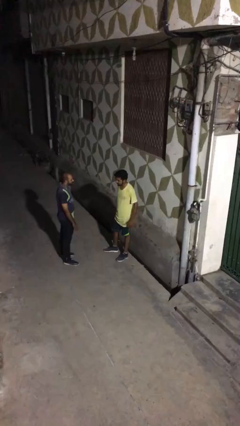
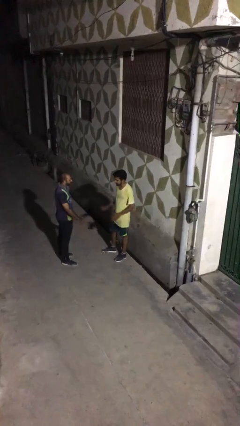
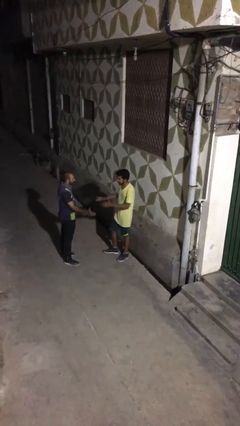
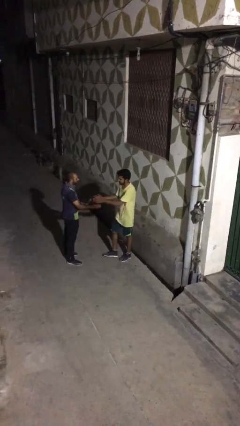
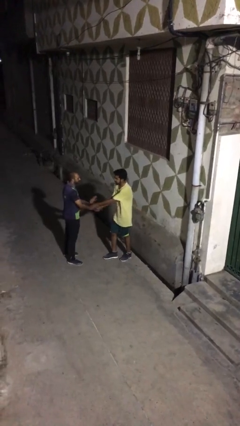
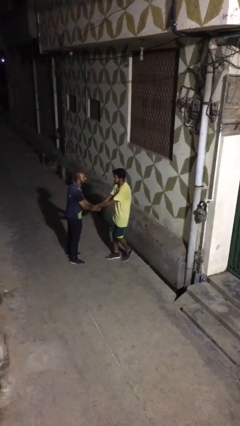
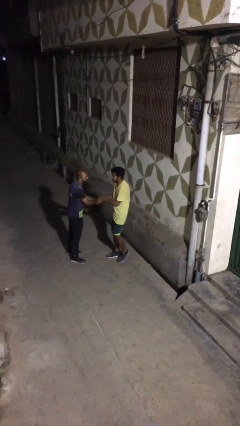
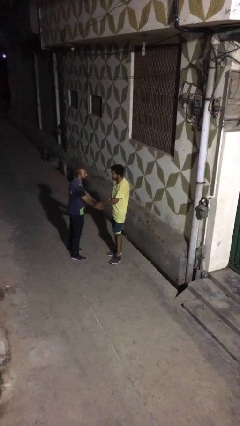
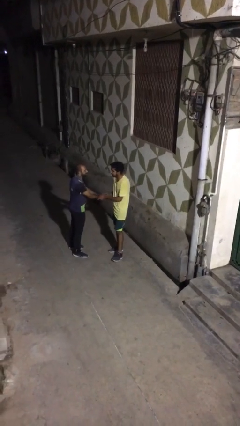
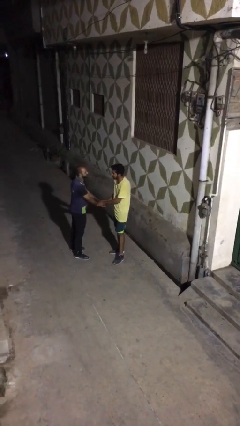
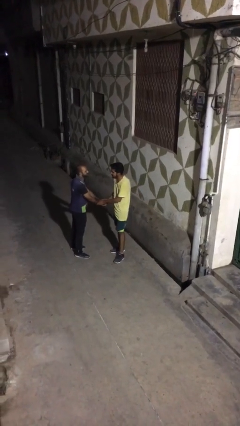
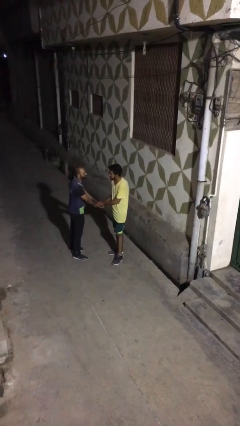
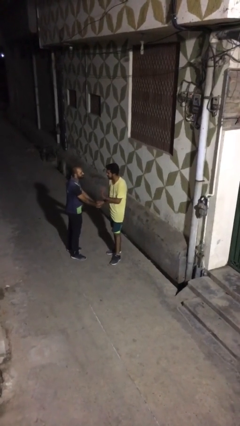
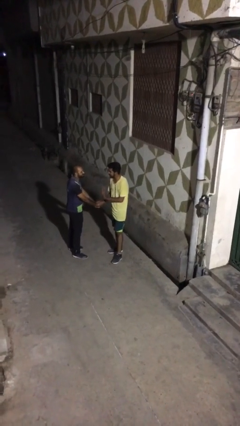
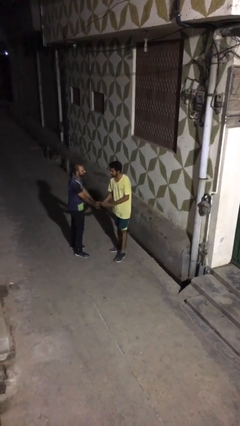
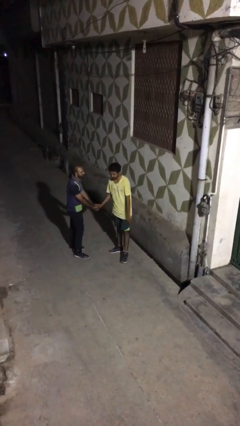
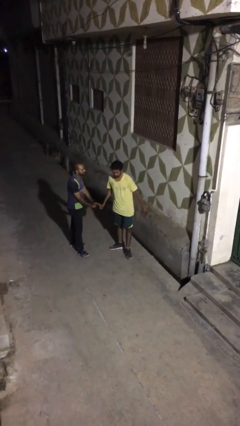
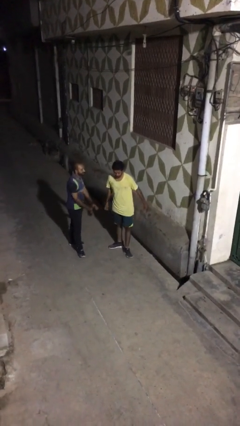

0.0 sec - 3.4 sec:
person shakes hand

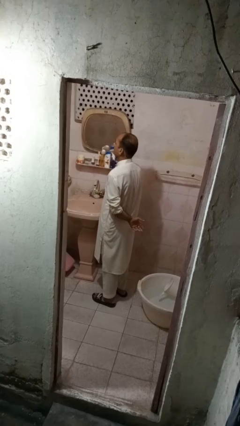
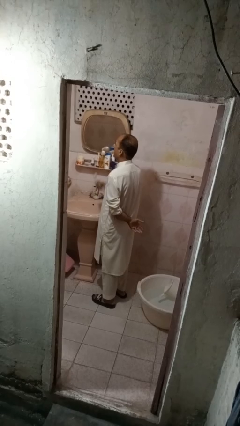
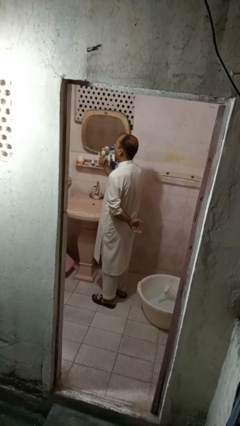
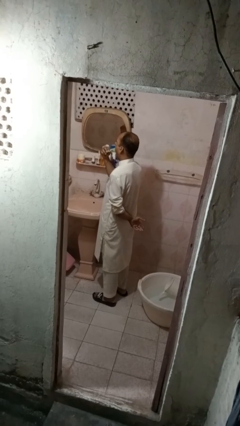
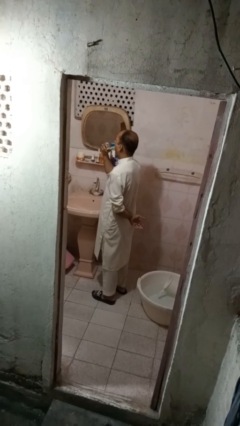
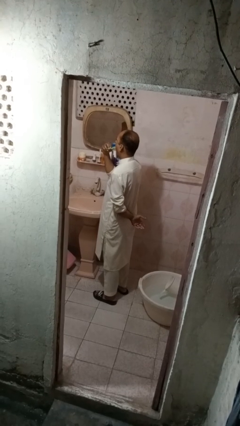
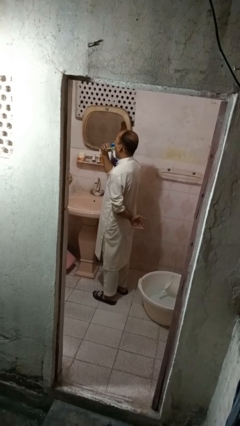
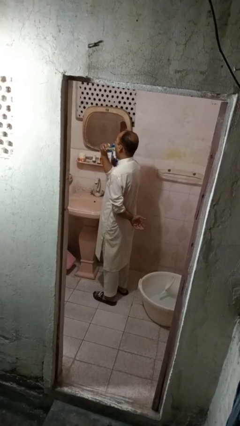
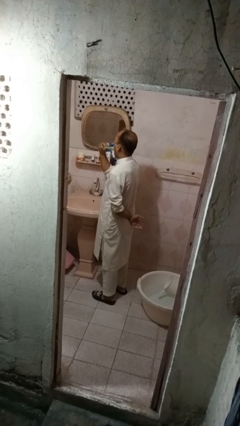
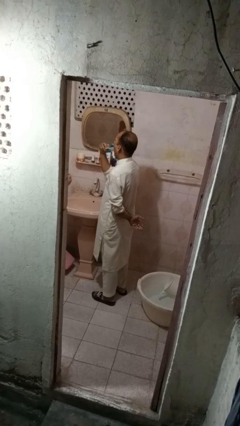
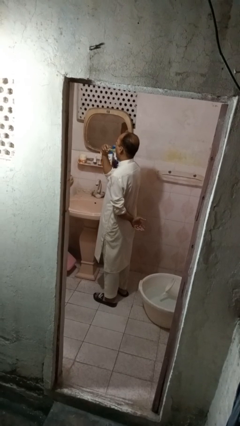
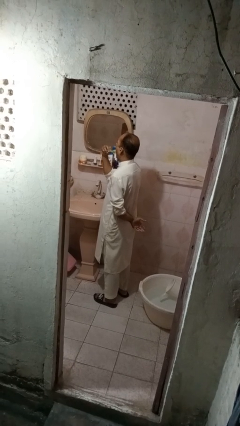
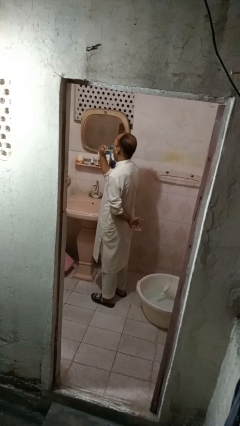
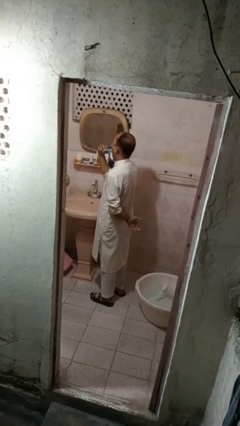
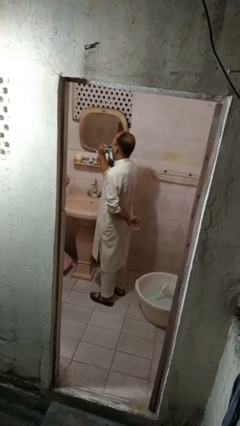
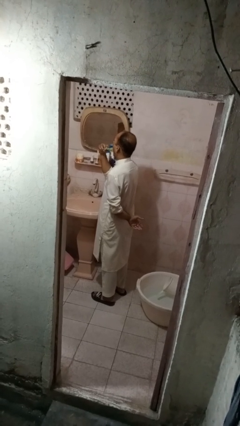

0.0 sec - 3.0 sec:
person brushes teeth

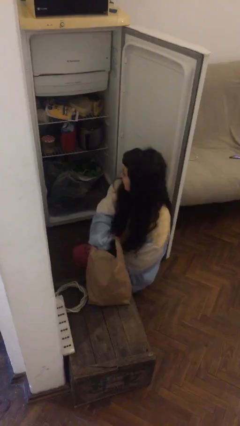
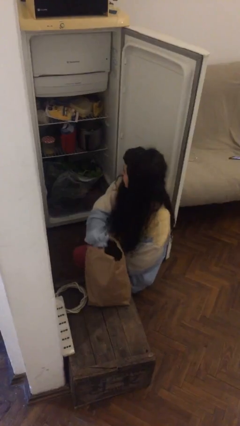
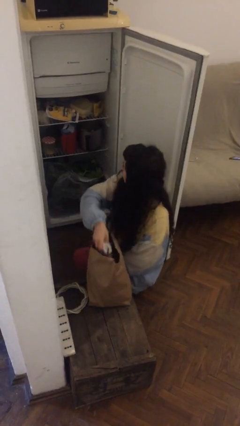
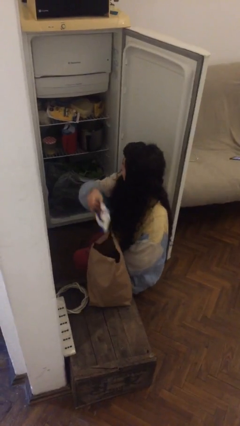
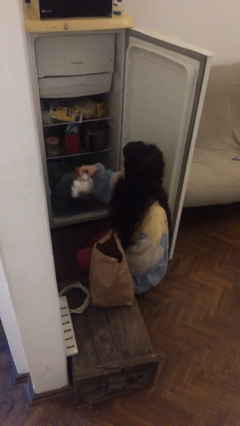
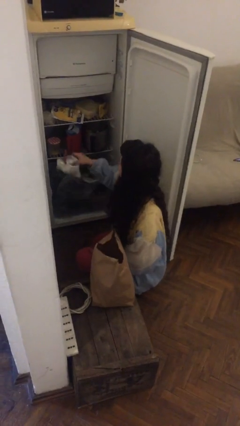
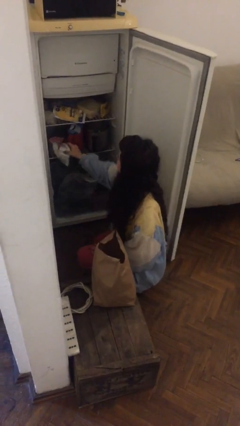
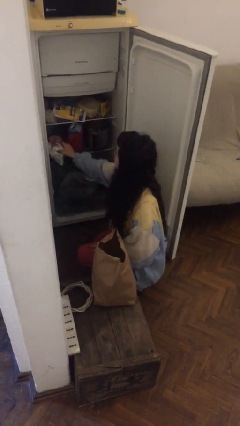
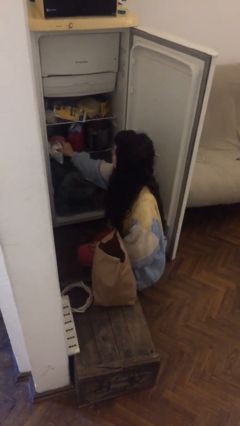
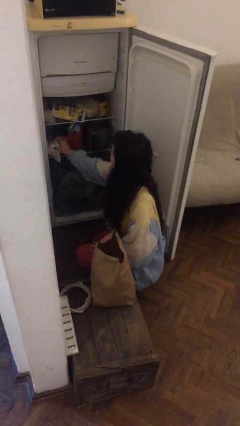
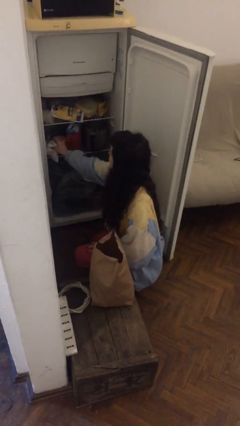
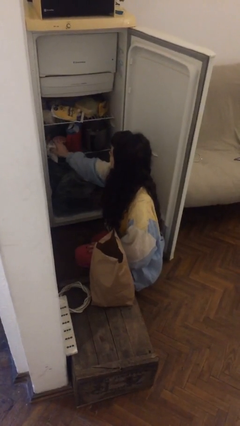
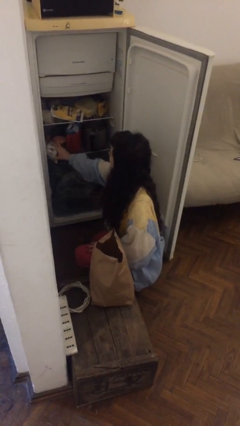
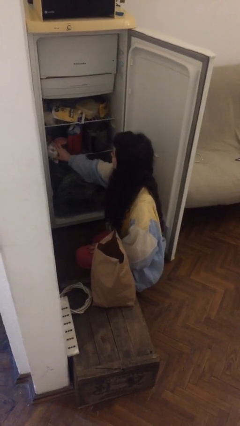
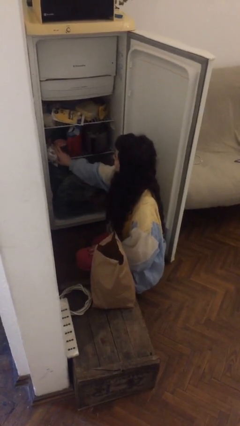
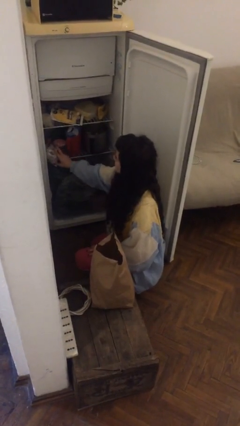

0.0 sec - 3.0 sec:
person loads groceries into refrigerator

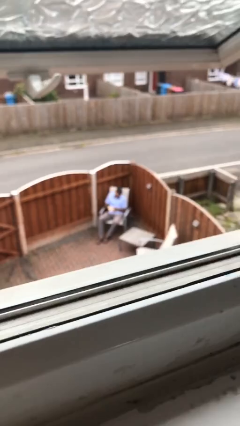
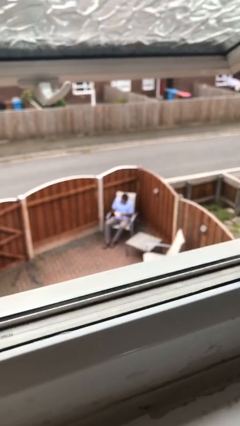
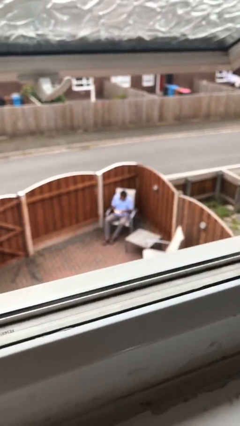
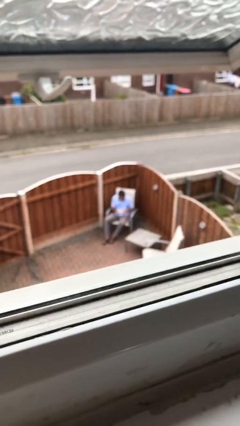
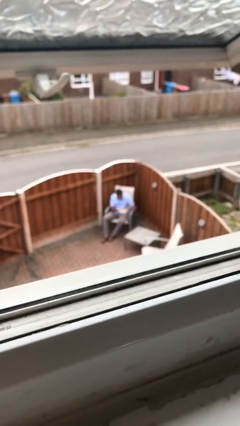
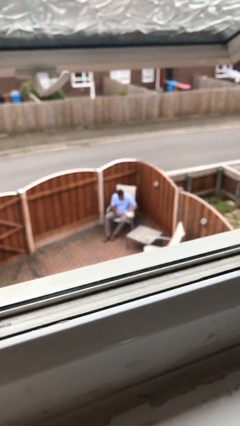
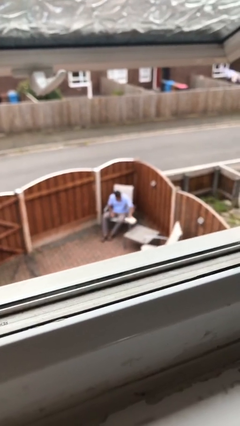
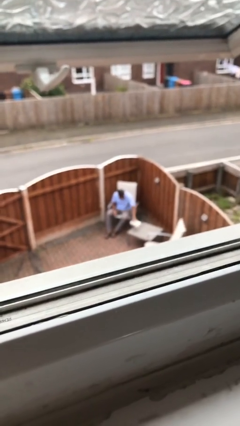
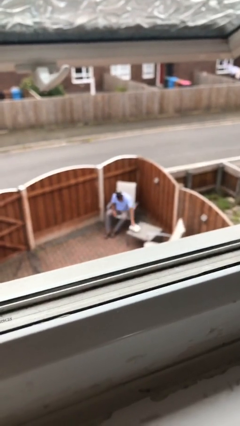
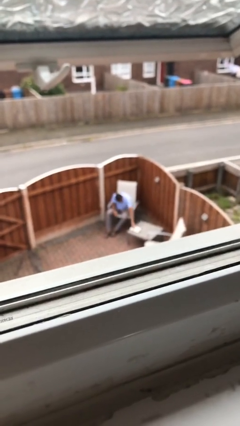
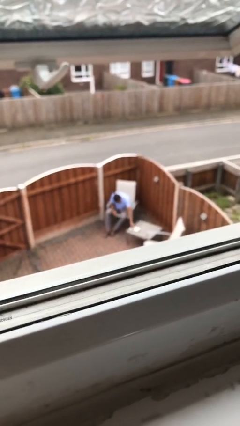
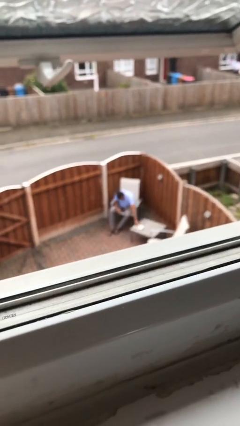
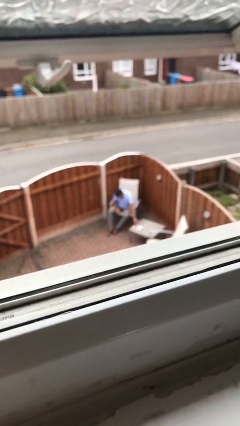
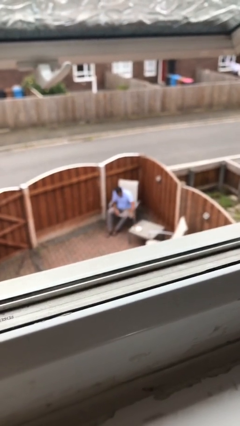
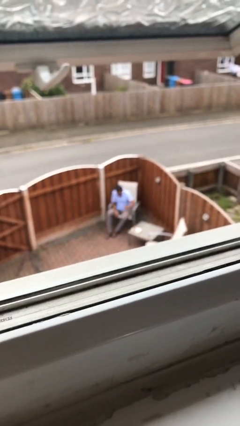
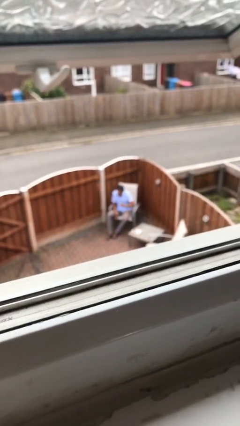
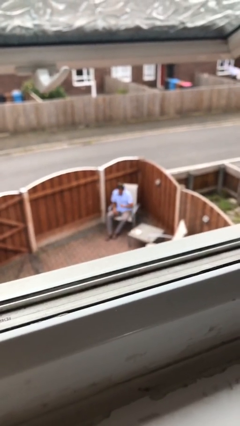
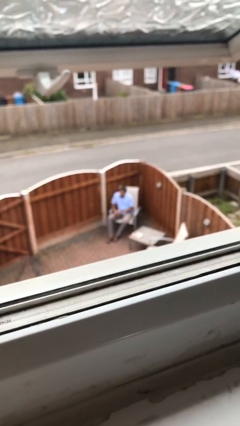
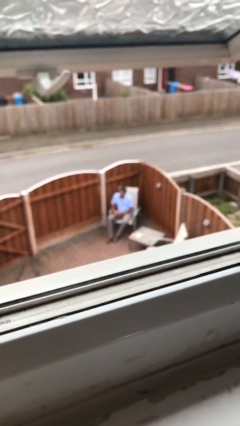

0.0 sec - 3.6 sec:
person puts down object on table

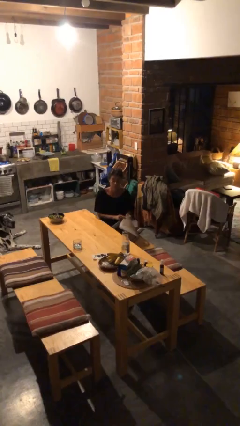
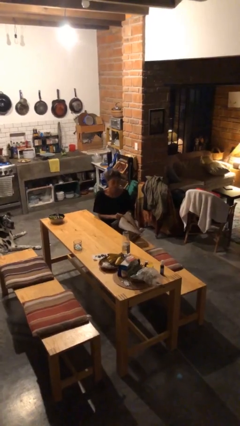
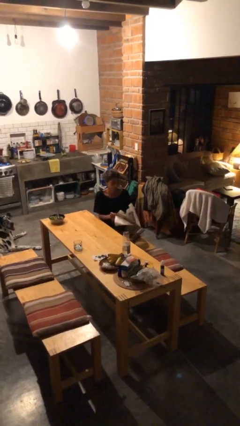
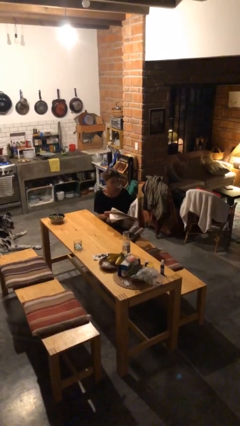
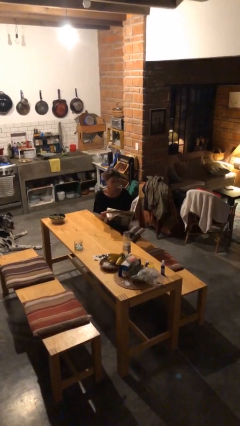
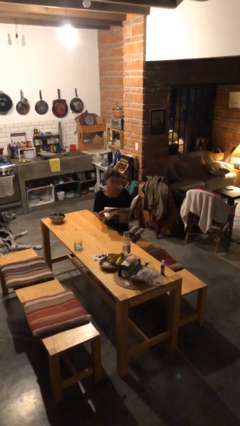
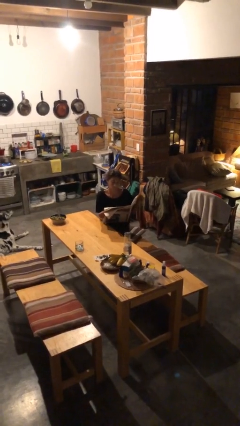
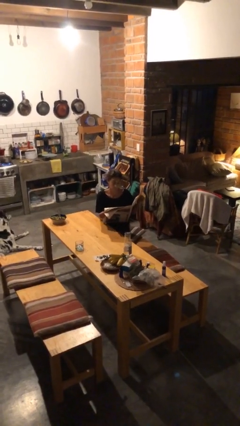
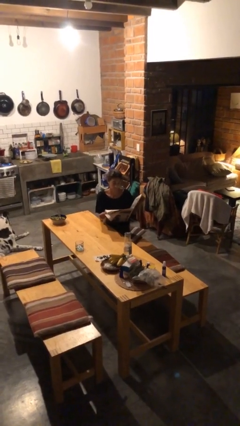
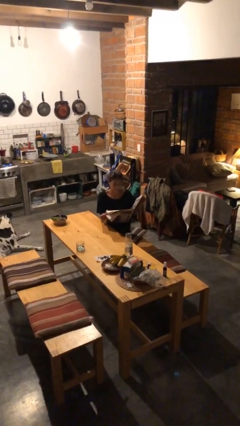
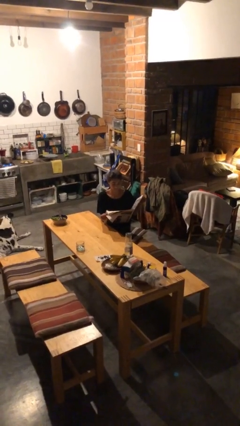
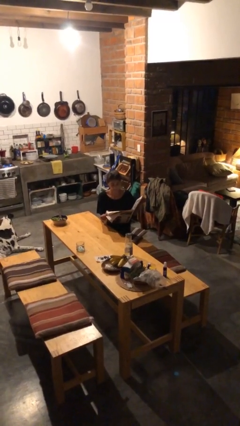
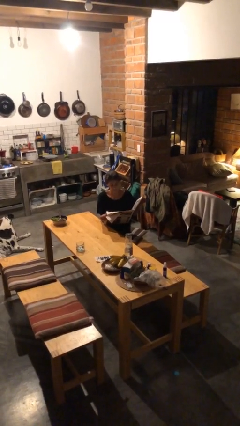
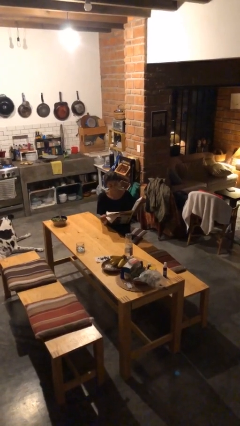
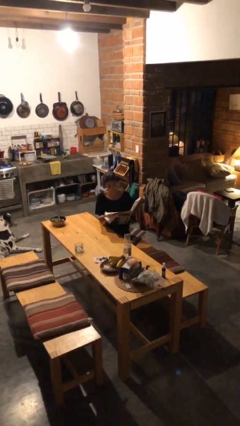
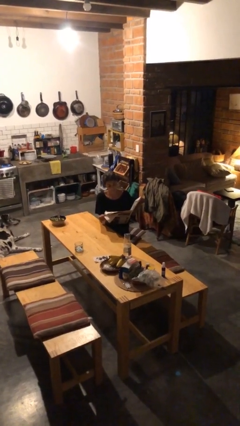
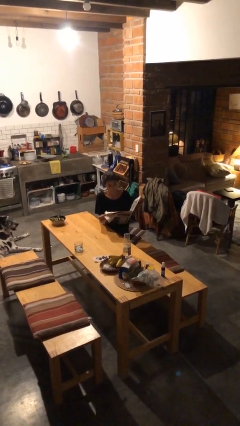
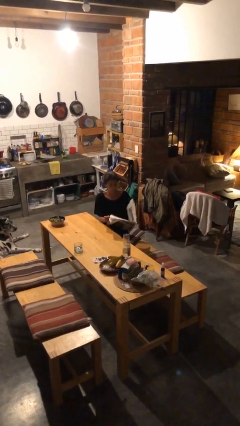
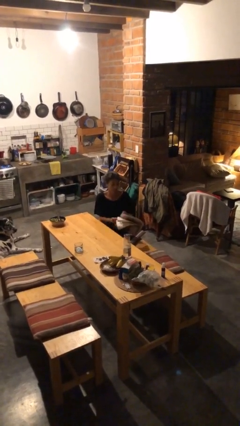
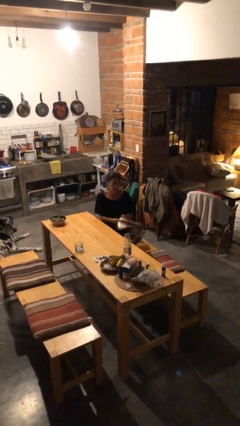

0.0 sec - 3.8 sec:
person reads newspaper

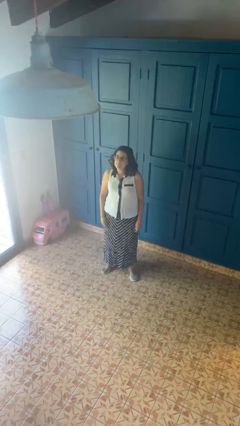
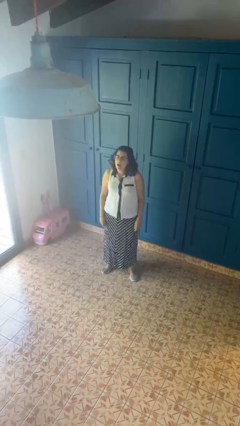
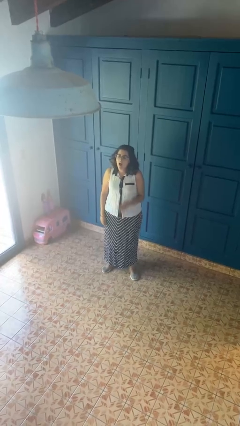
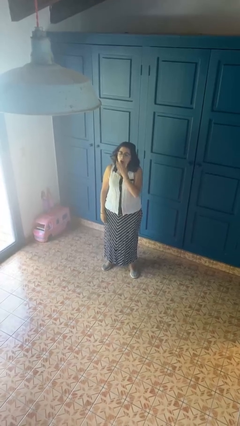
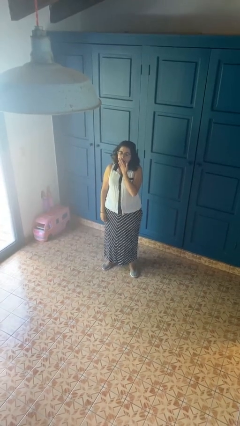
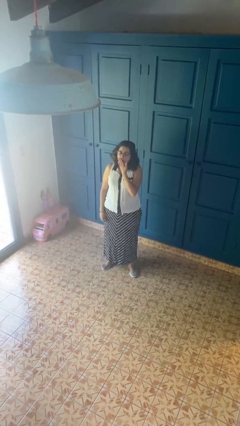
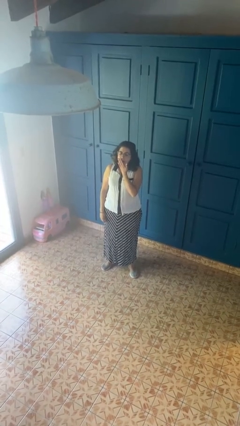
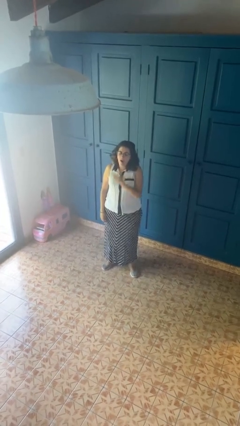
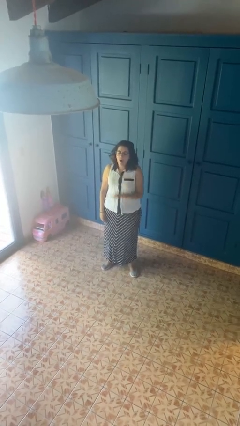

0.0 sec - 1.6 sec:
person yawns
